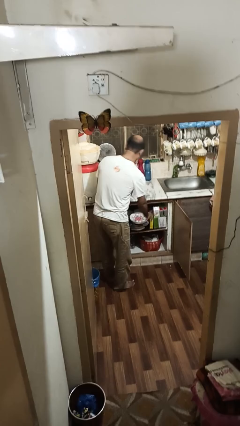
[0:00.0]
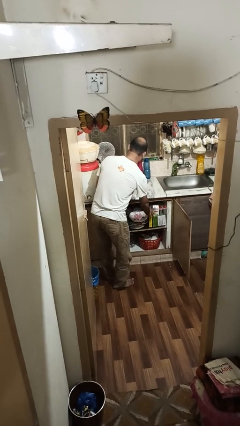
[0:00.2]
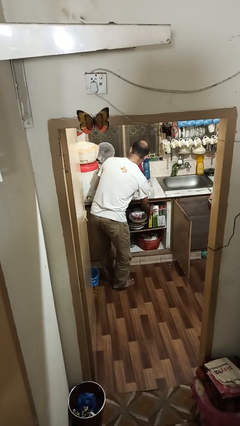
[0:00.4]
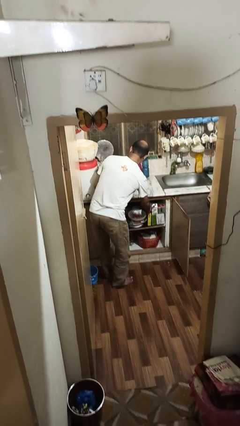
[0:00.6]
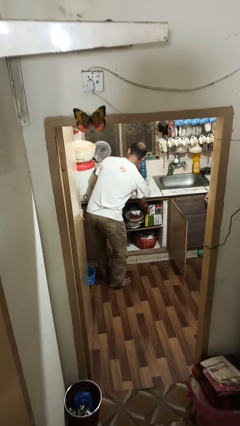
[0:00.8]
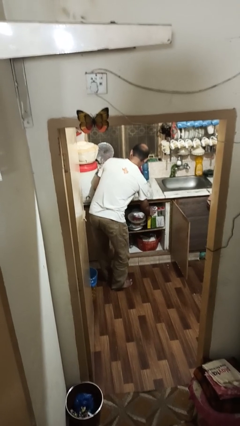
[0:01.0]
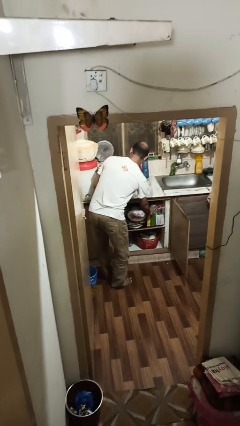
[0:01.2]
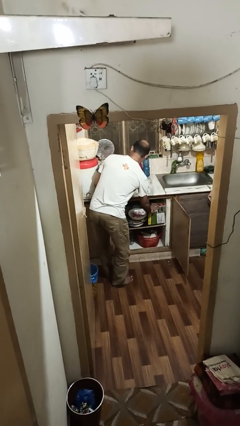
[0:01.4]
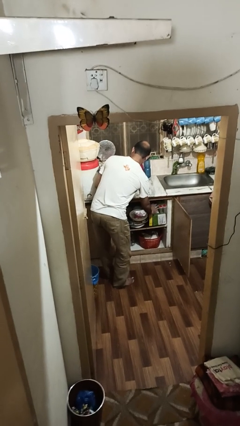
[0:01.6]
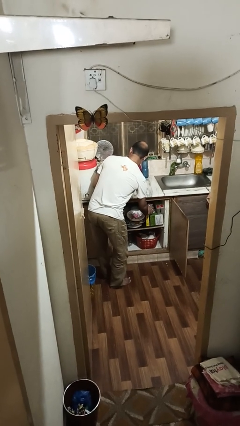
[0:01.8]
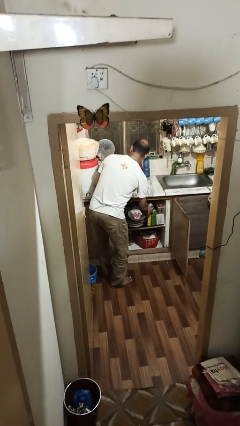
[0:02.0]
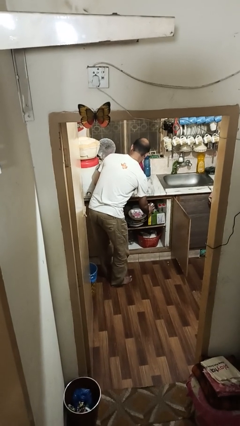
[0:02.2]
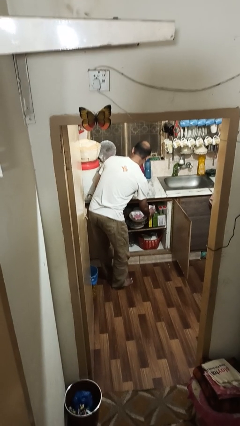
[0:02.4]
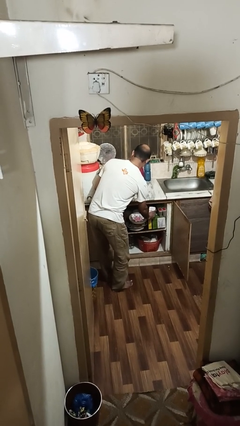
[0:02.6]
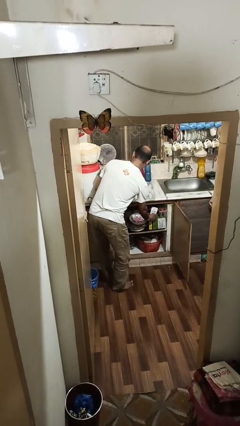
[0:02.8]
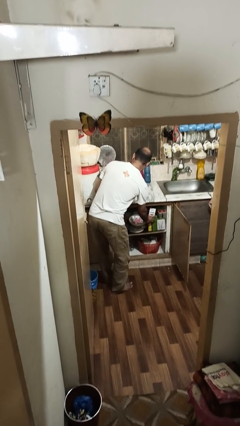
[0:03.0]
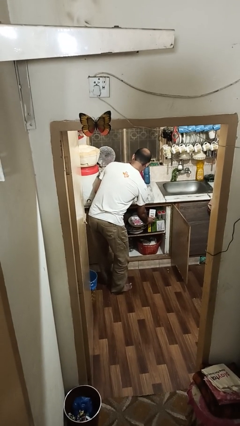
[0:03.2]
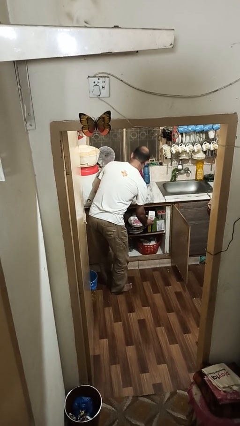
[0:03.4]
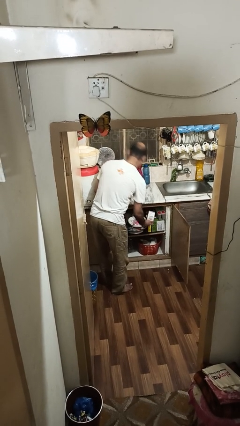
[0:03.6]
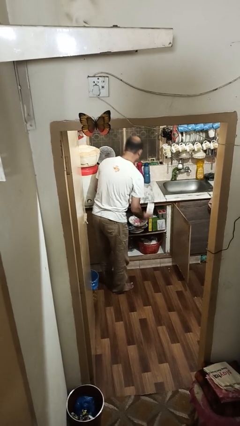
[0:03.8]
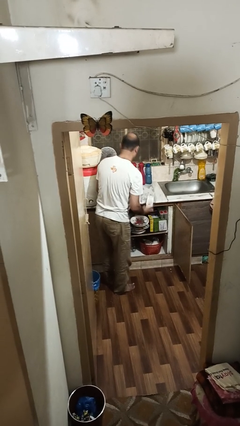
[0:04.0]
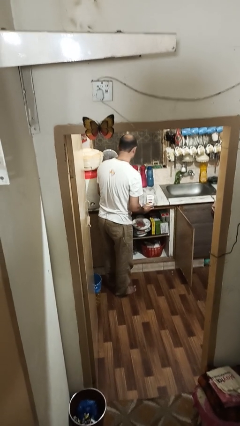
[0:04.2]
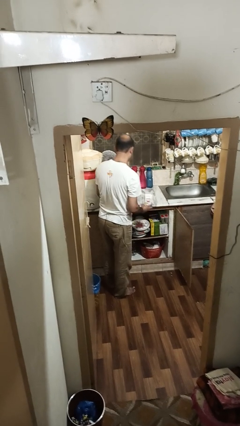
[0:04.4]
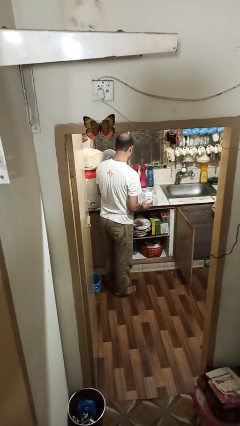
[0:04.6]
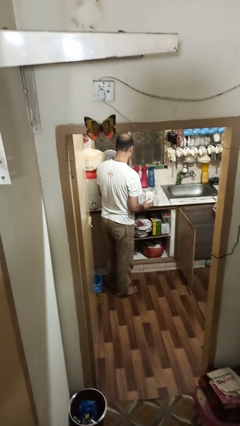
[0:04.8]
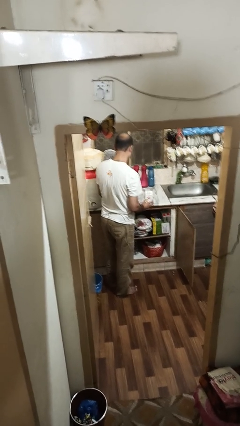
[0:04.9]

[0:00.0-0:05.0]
person takes object from cabinet

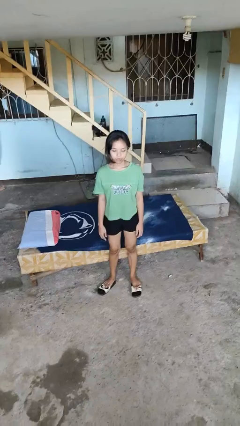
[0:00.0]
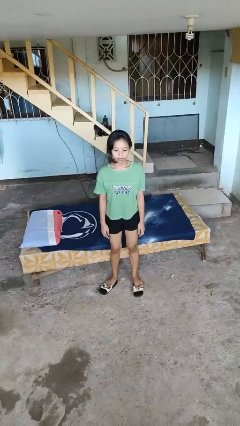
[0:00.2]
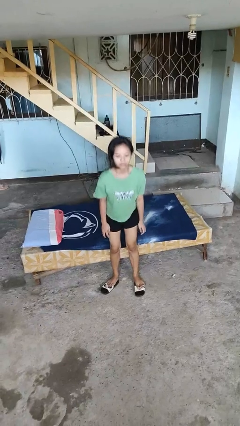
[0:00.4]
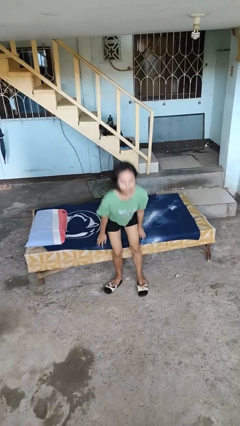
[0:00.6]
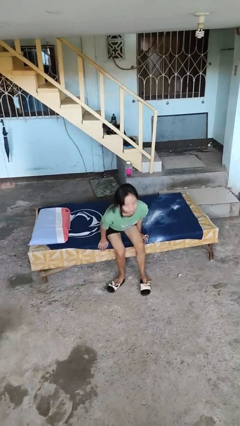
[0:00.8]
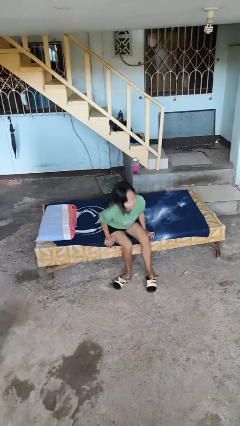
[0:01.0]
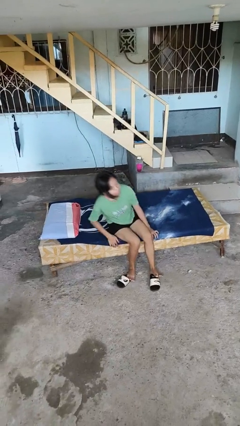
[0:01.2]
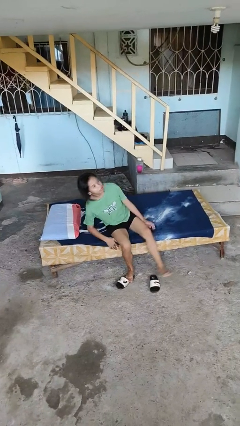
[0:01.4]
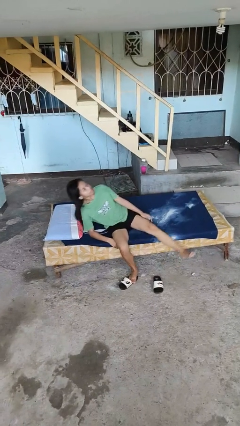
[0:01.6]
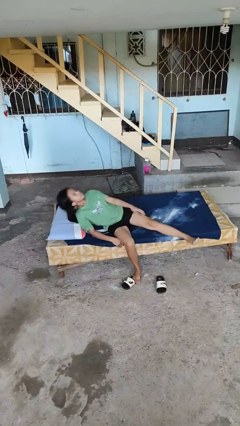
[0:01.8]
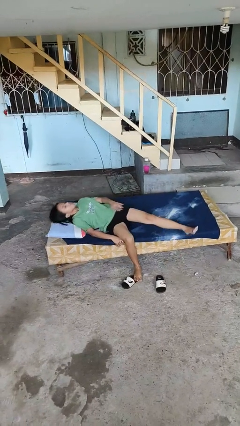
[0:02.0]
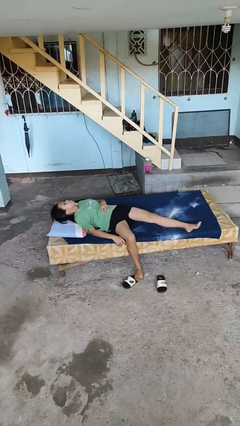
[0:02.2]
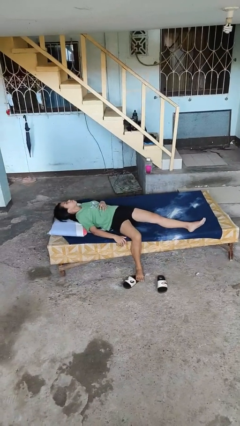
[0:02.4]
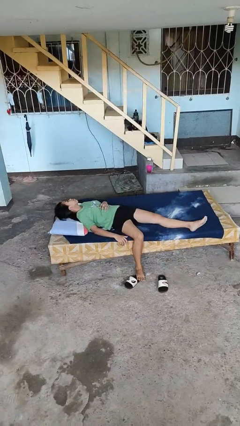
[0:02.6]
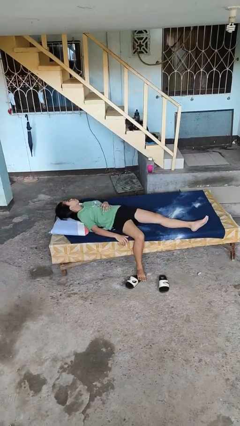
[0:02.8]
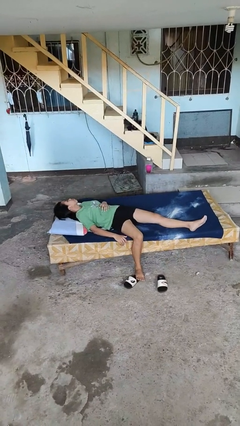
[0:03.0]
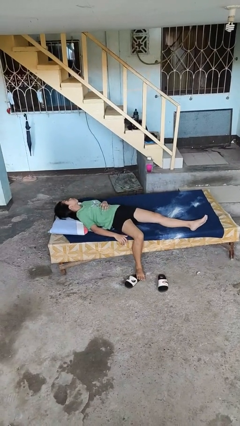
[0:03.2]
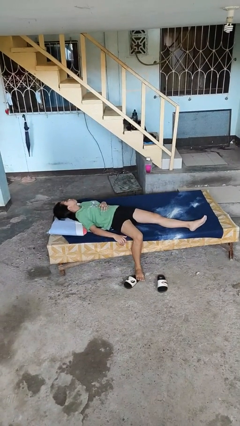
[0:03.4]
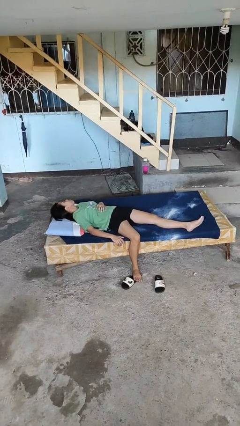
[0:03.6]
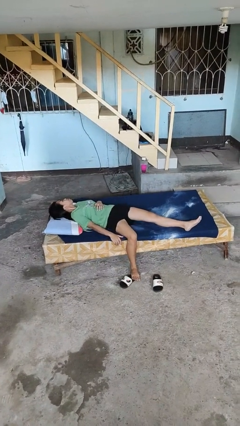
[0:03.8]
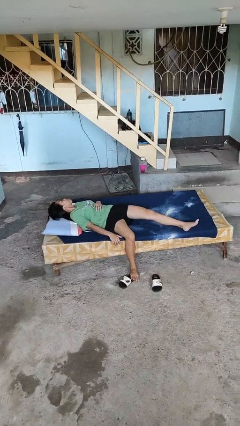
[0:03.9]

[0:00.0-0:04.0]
person lies down on bed

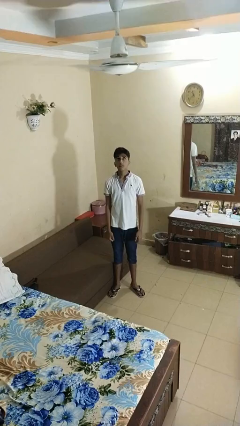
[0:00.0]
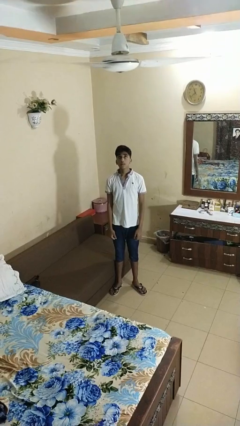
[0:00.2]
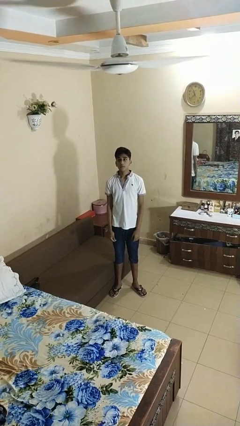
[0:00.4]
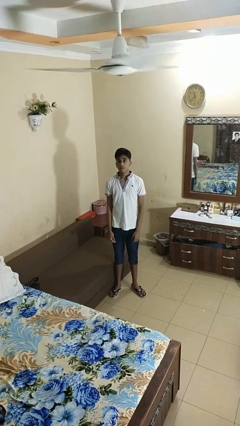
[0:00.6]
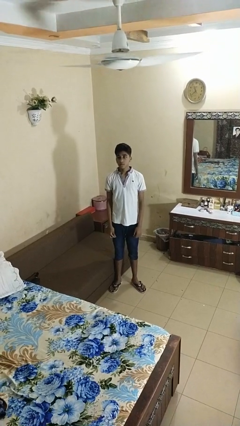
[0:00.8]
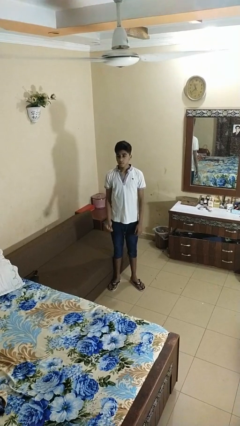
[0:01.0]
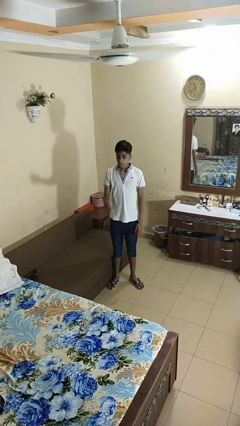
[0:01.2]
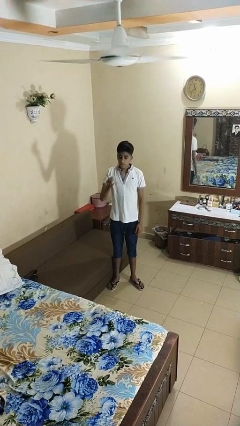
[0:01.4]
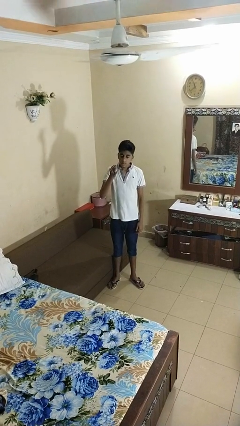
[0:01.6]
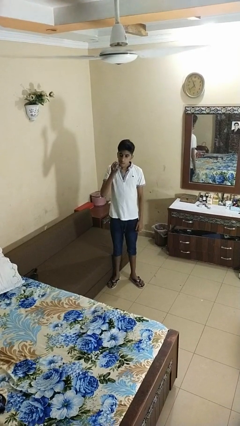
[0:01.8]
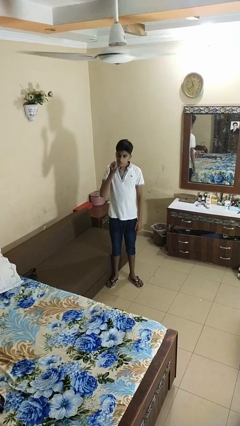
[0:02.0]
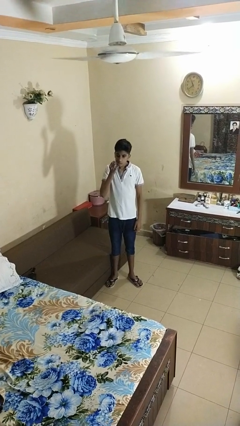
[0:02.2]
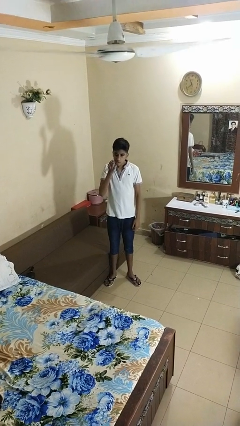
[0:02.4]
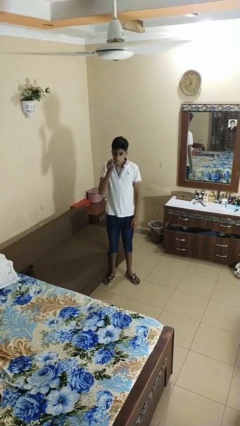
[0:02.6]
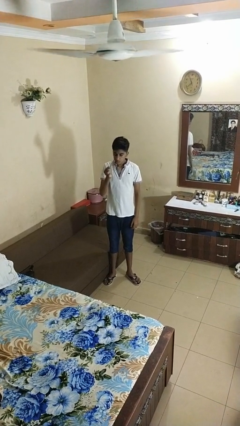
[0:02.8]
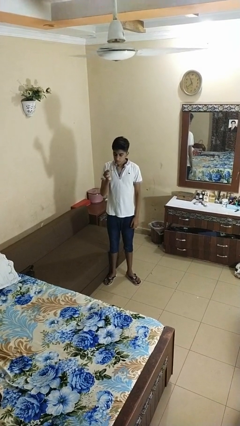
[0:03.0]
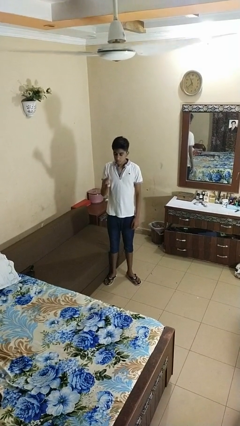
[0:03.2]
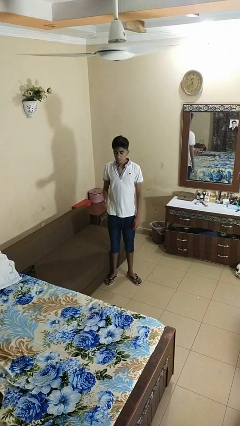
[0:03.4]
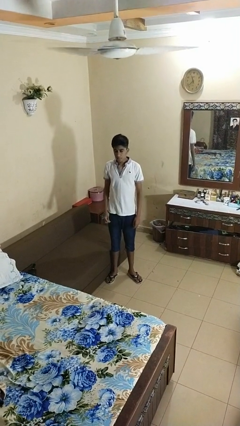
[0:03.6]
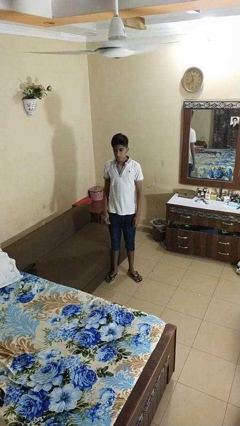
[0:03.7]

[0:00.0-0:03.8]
person flosses

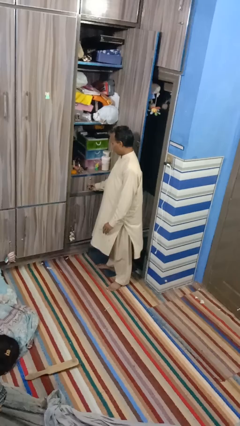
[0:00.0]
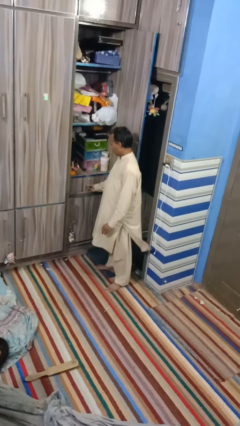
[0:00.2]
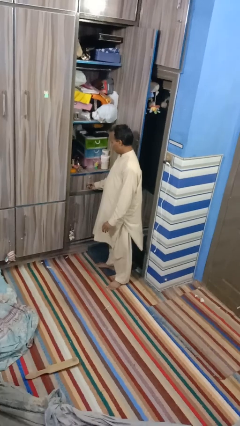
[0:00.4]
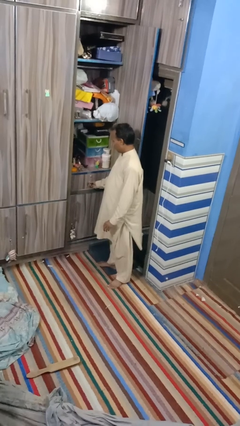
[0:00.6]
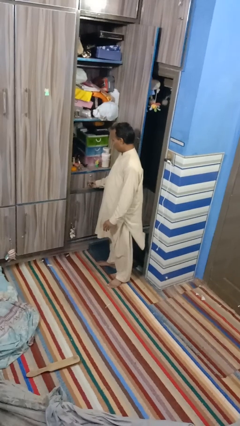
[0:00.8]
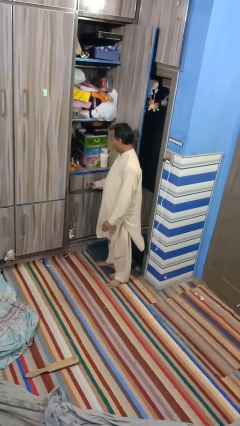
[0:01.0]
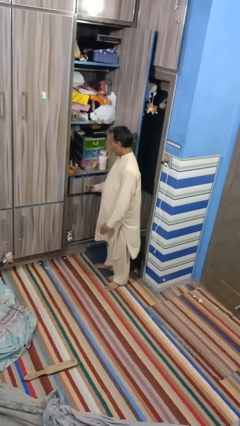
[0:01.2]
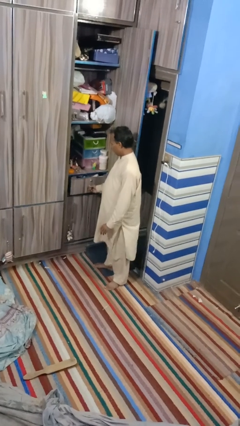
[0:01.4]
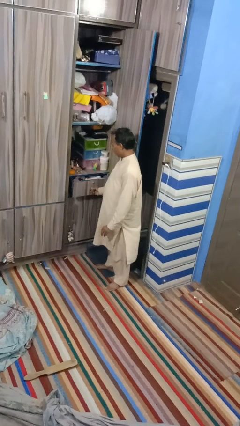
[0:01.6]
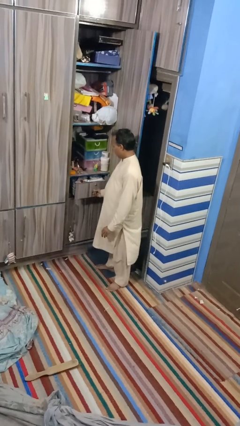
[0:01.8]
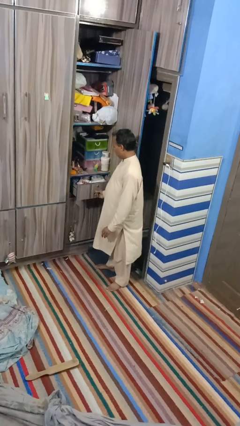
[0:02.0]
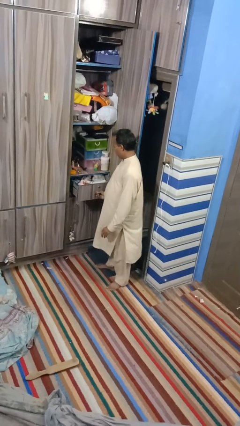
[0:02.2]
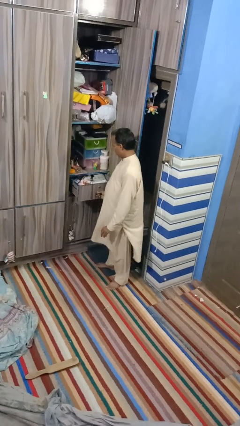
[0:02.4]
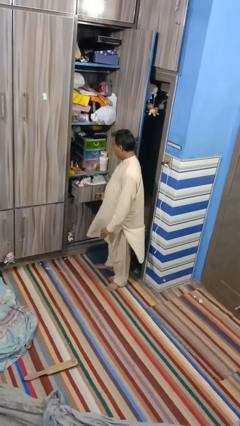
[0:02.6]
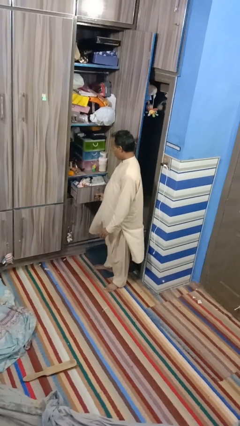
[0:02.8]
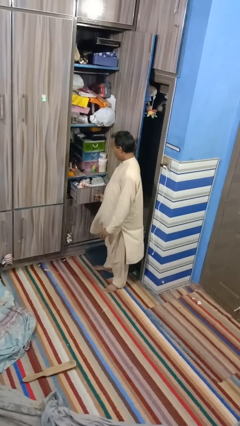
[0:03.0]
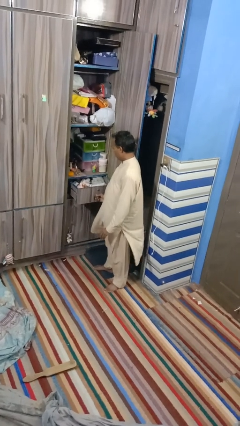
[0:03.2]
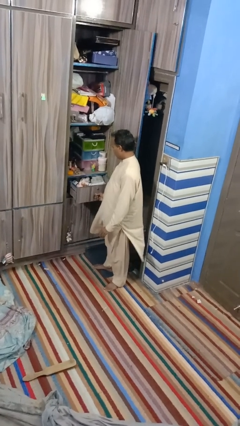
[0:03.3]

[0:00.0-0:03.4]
person opens dresser drawer

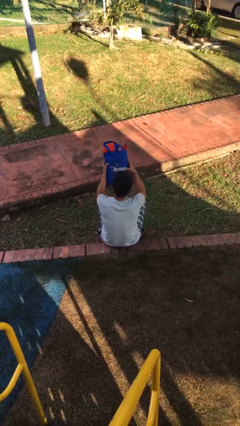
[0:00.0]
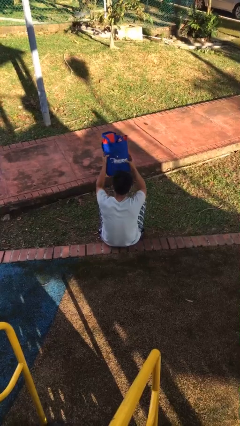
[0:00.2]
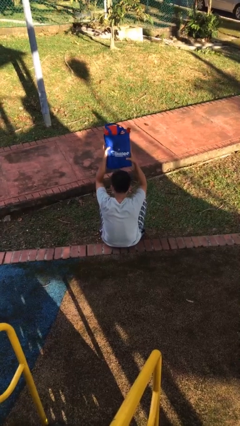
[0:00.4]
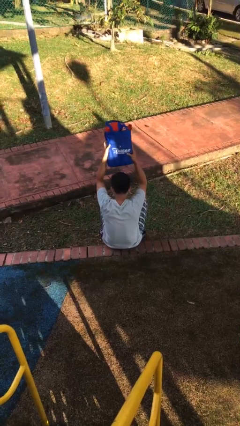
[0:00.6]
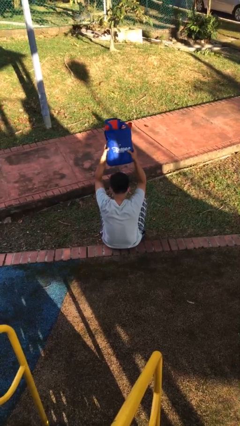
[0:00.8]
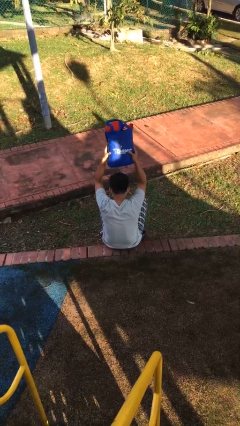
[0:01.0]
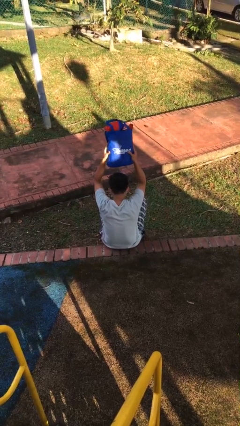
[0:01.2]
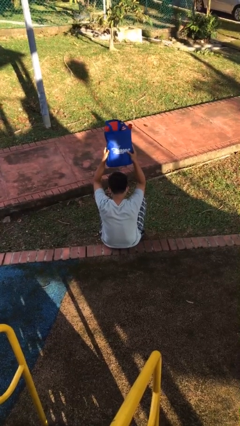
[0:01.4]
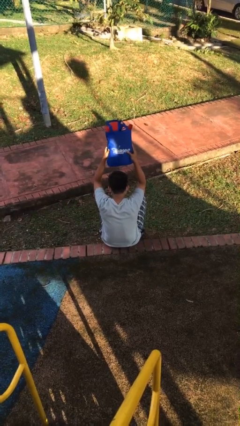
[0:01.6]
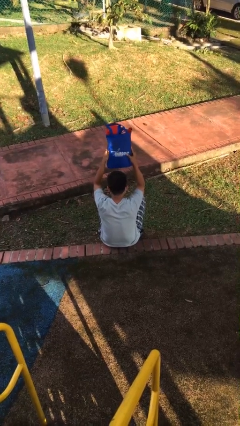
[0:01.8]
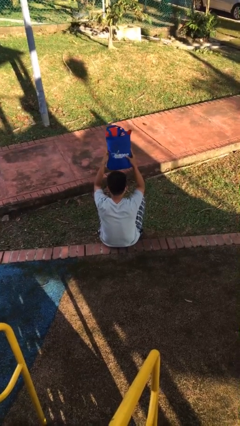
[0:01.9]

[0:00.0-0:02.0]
person holds object above head
